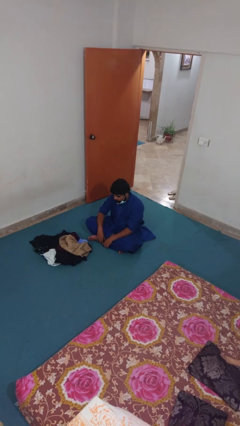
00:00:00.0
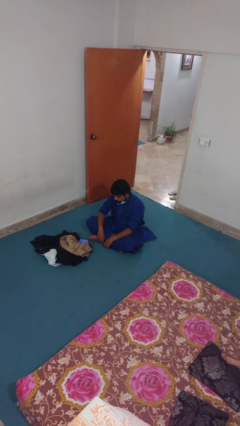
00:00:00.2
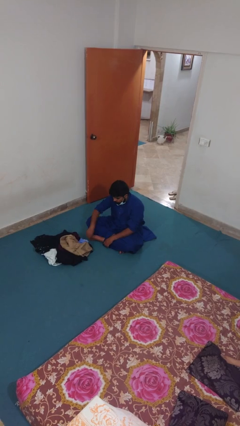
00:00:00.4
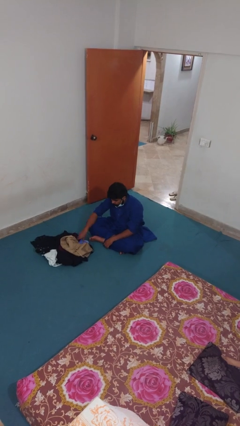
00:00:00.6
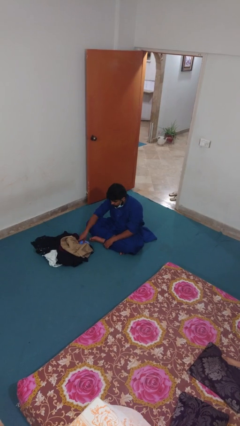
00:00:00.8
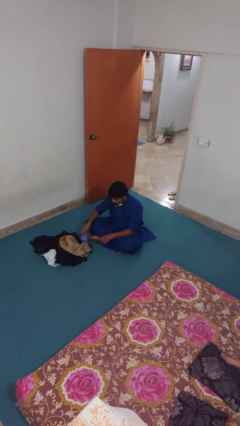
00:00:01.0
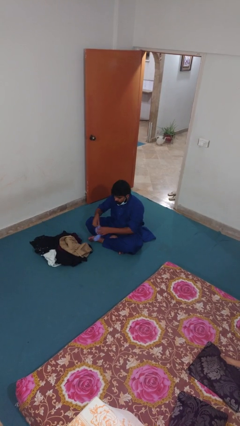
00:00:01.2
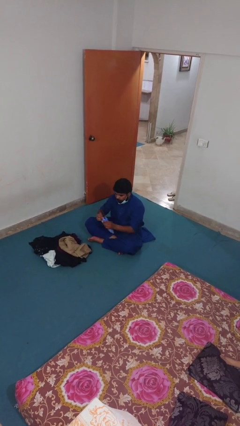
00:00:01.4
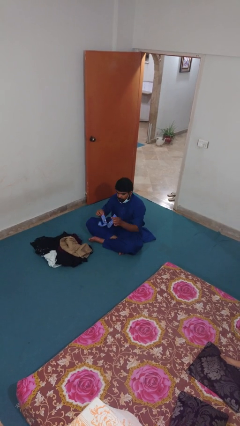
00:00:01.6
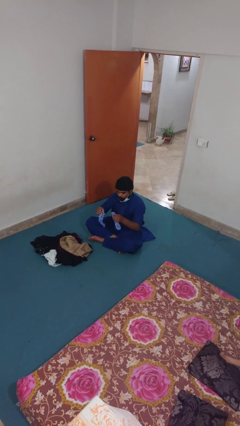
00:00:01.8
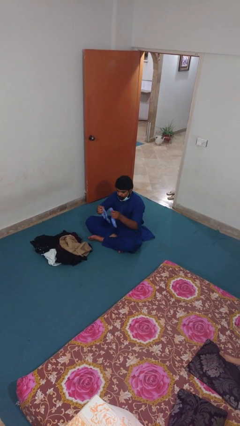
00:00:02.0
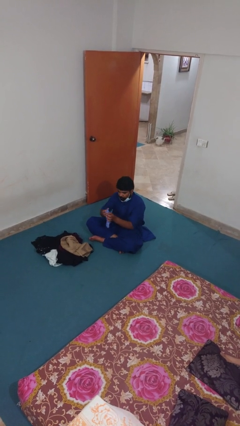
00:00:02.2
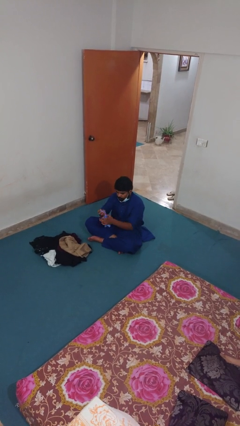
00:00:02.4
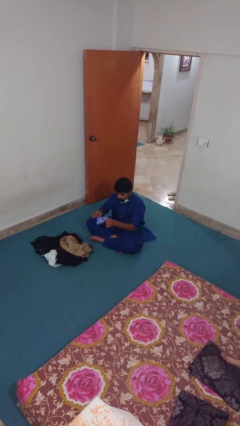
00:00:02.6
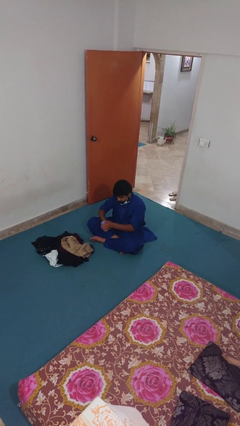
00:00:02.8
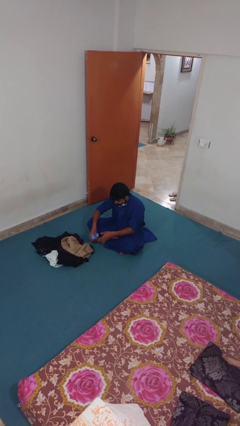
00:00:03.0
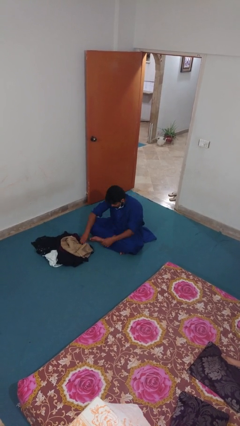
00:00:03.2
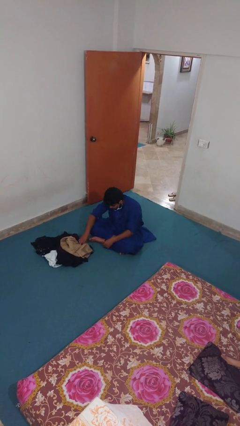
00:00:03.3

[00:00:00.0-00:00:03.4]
person folds socks

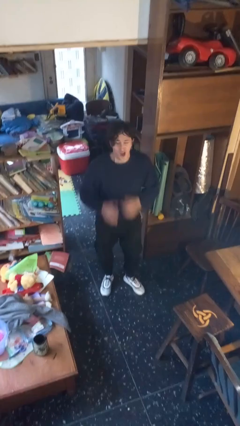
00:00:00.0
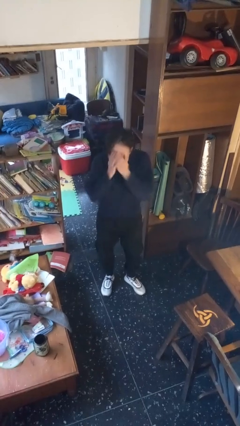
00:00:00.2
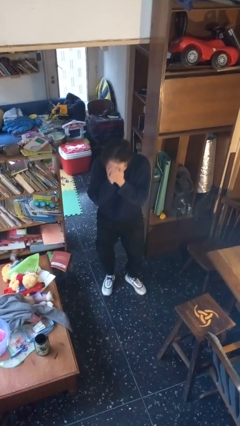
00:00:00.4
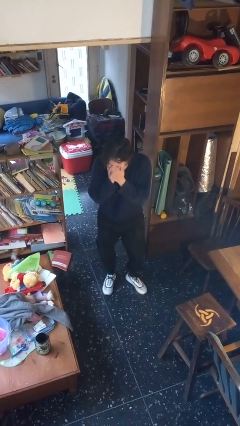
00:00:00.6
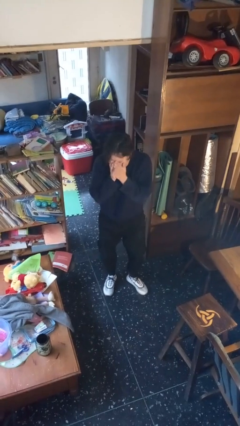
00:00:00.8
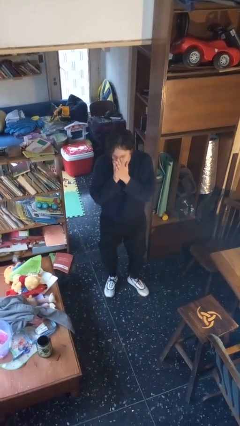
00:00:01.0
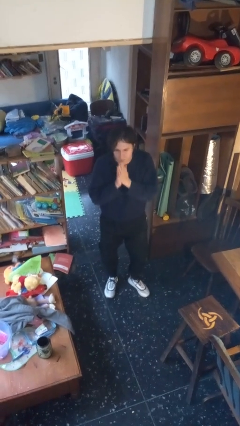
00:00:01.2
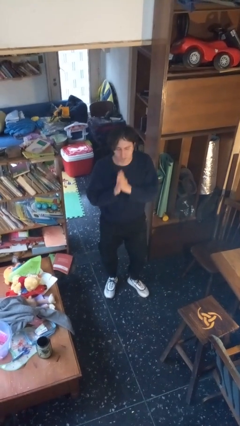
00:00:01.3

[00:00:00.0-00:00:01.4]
person sneezes into hand

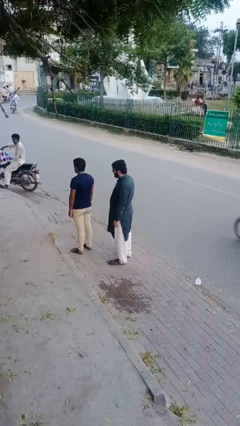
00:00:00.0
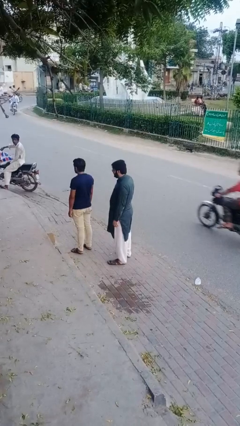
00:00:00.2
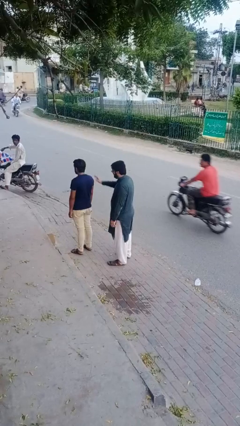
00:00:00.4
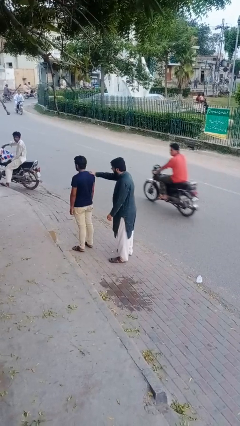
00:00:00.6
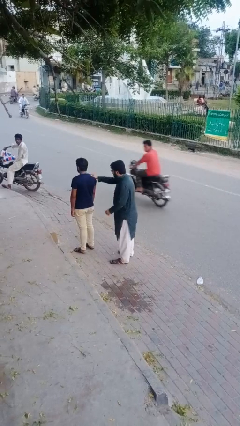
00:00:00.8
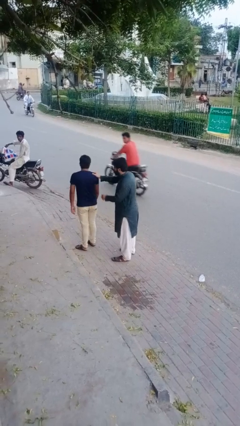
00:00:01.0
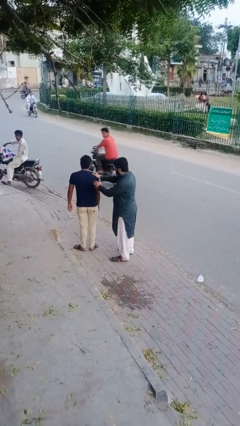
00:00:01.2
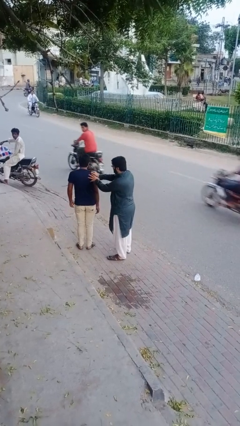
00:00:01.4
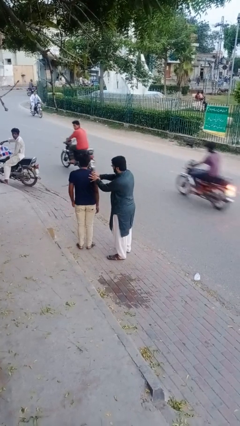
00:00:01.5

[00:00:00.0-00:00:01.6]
person grabs person by shoulder

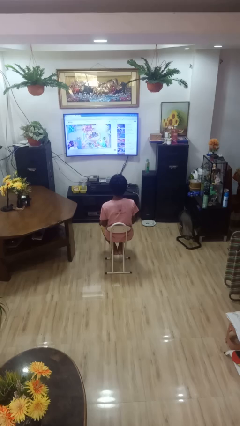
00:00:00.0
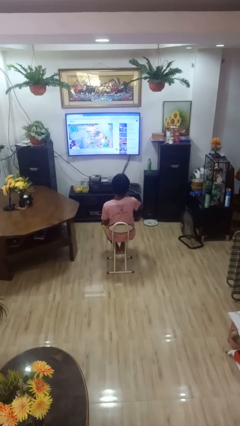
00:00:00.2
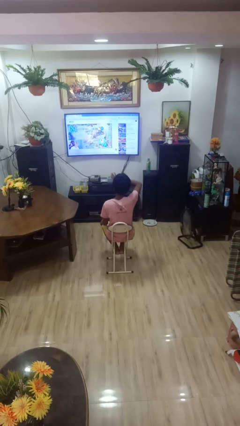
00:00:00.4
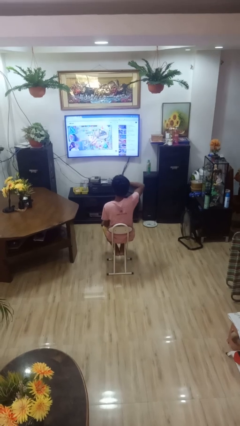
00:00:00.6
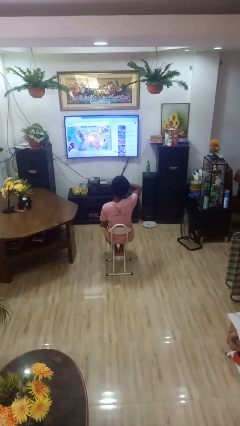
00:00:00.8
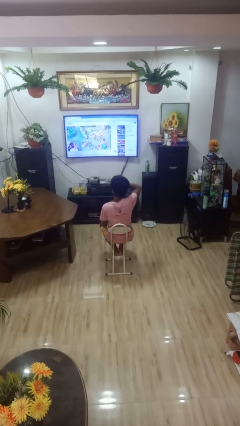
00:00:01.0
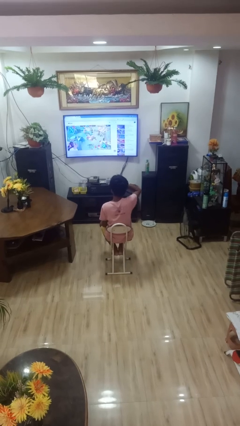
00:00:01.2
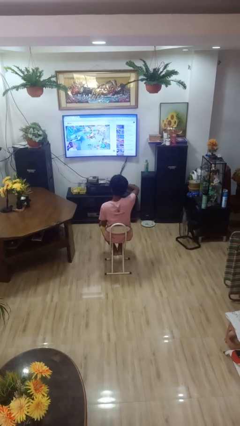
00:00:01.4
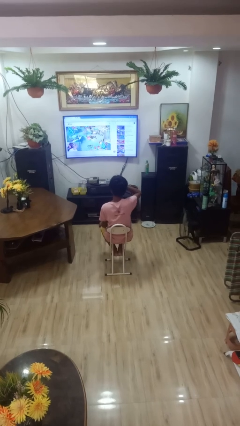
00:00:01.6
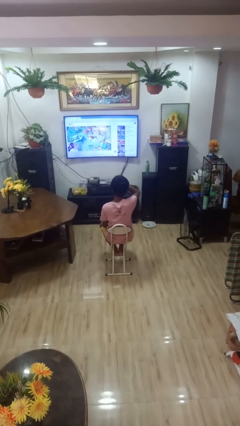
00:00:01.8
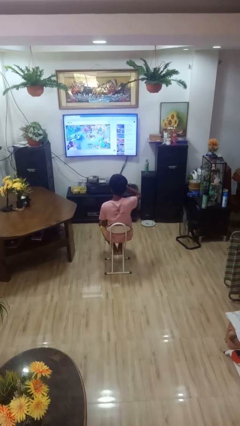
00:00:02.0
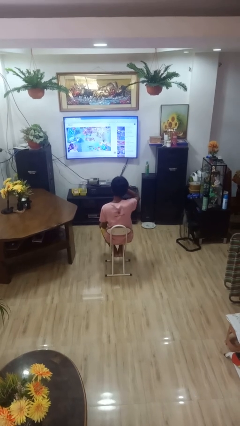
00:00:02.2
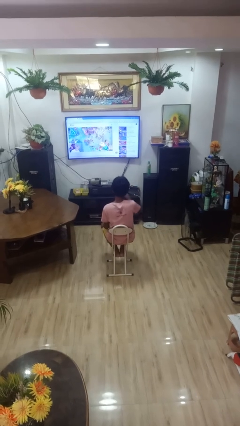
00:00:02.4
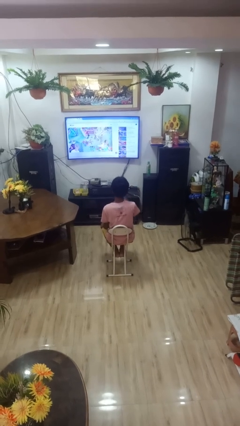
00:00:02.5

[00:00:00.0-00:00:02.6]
person rubs eyes

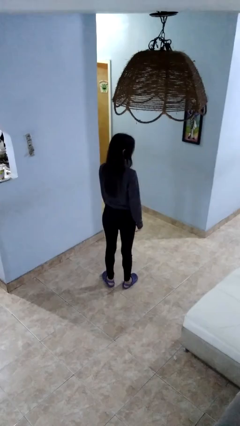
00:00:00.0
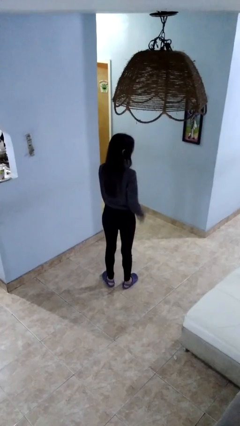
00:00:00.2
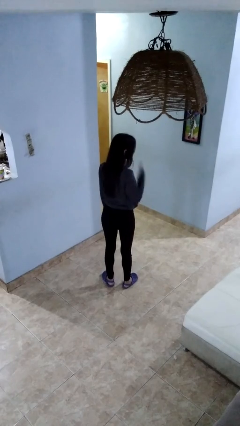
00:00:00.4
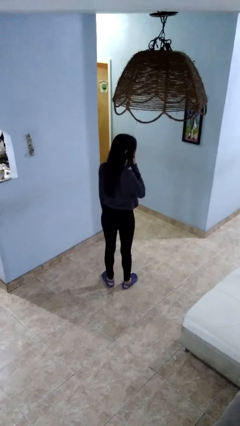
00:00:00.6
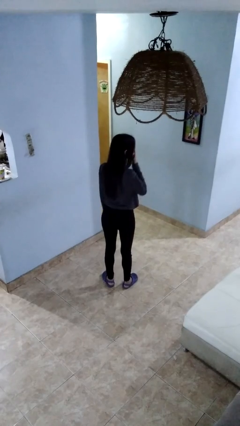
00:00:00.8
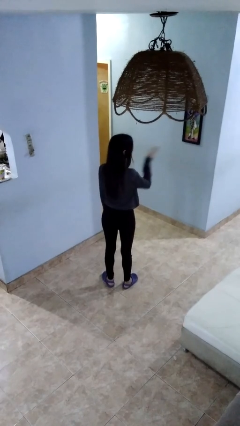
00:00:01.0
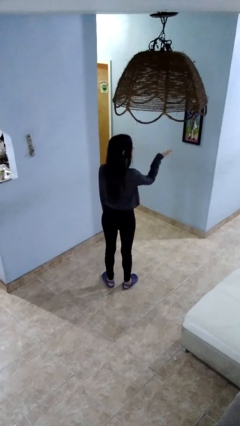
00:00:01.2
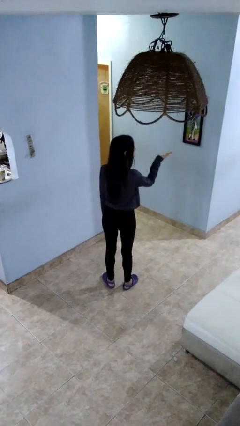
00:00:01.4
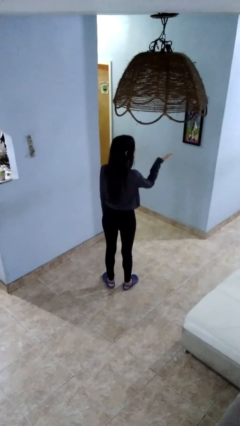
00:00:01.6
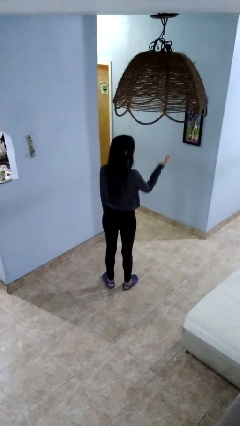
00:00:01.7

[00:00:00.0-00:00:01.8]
person gestures blow kiss

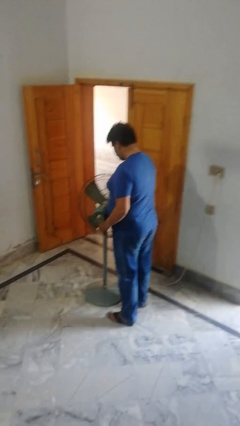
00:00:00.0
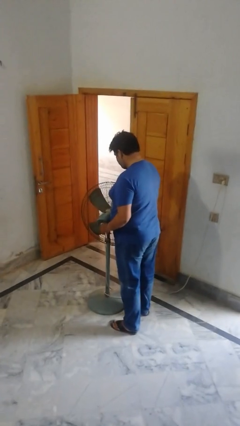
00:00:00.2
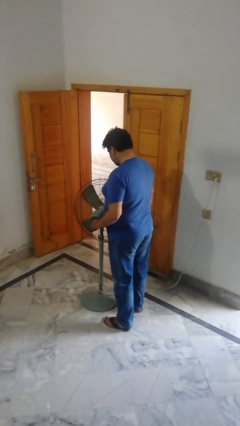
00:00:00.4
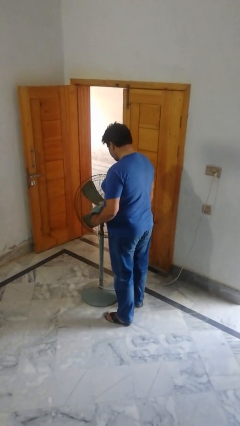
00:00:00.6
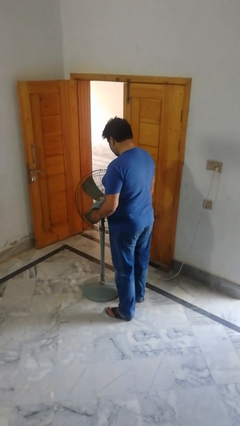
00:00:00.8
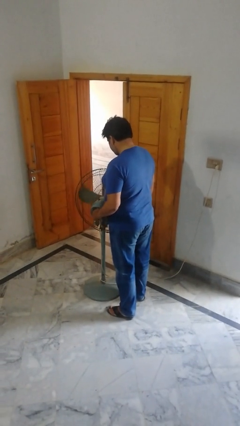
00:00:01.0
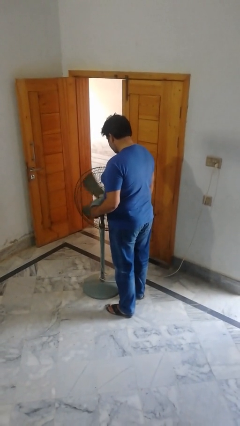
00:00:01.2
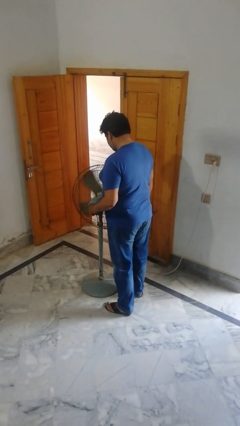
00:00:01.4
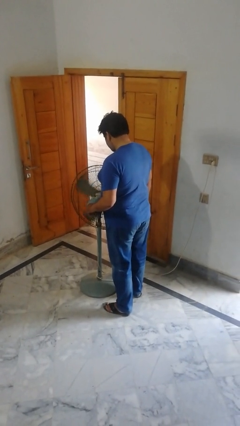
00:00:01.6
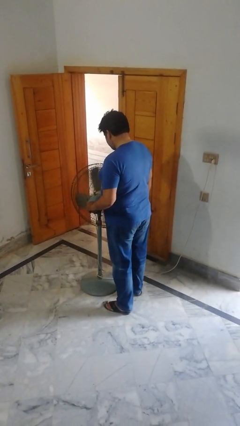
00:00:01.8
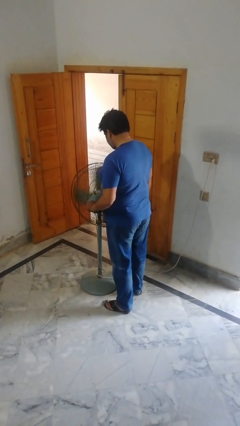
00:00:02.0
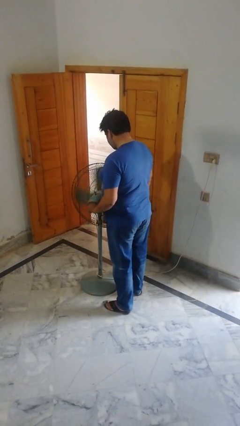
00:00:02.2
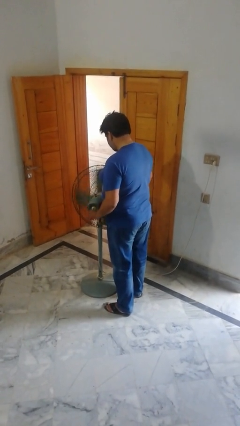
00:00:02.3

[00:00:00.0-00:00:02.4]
person turns on fan

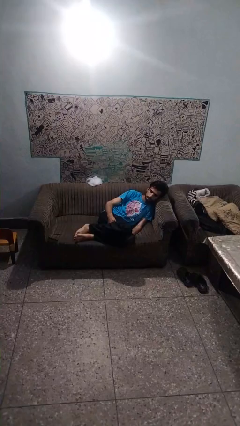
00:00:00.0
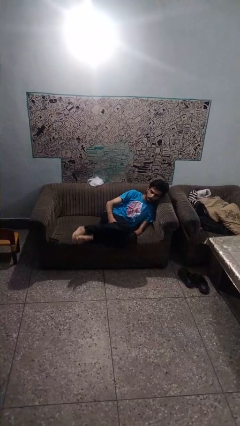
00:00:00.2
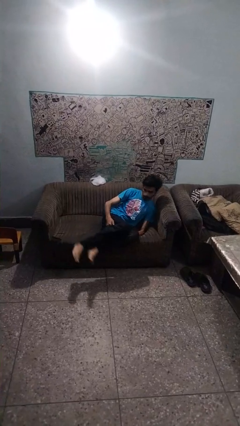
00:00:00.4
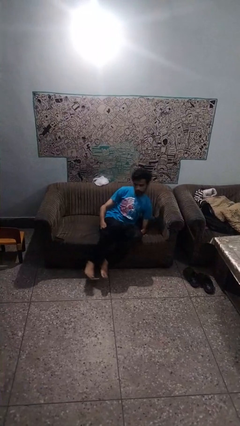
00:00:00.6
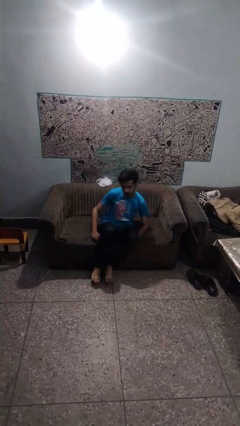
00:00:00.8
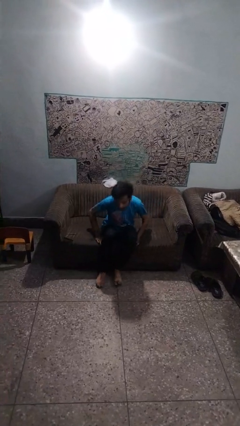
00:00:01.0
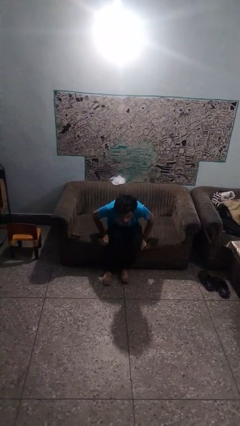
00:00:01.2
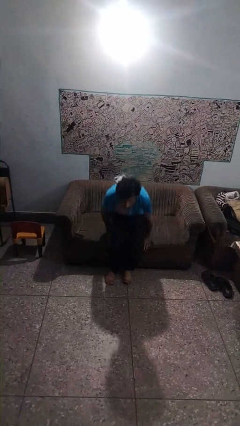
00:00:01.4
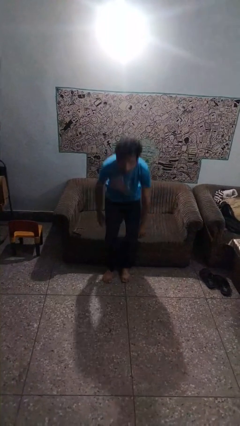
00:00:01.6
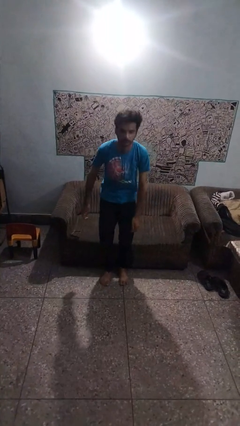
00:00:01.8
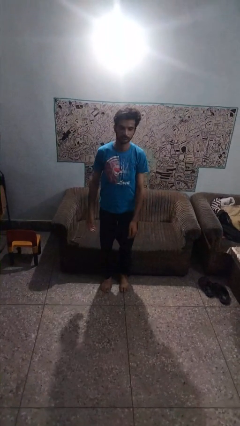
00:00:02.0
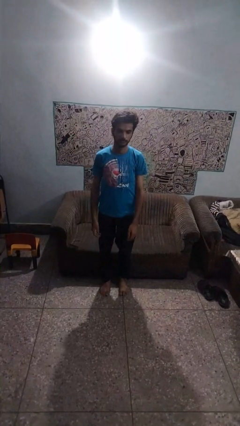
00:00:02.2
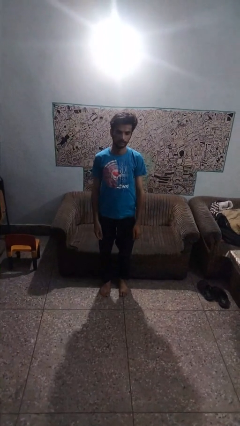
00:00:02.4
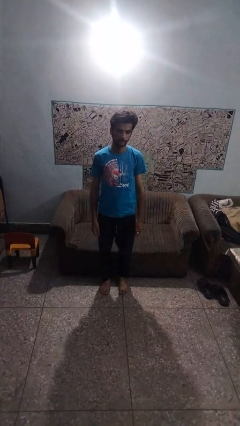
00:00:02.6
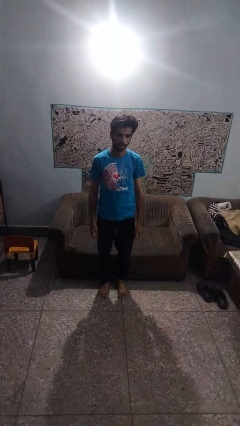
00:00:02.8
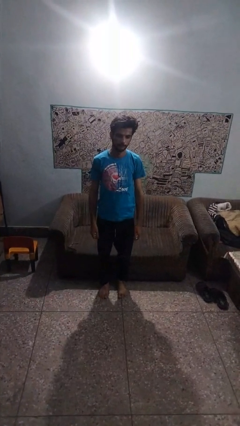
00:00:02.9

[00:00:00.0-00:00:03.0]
person stands up

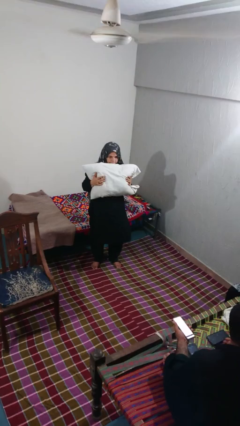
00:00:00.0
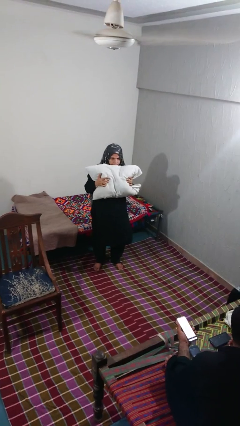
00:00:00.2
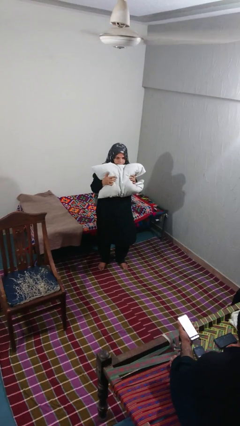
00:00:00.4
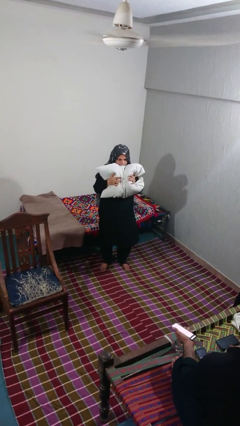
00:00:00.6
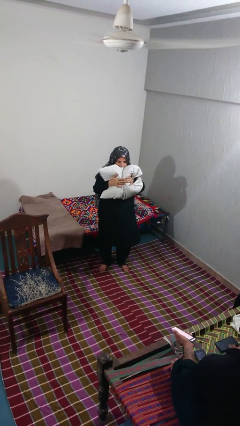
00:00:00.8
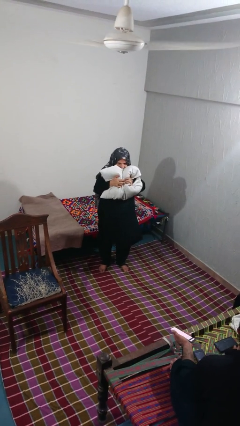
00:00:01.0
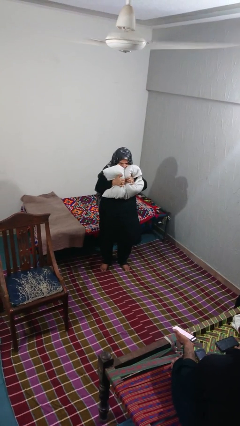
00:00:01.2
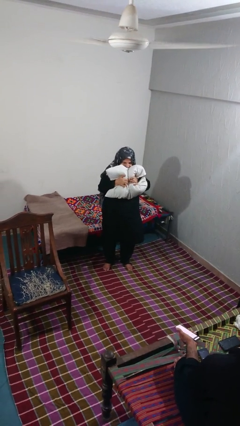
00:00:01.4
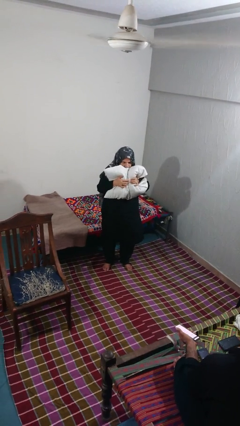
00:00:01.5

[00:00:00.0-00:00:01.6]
person squeezes object
